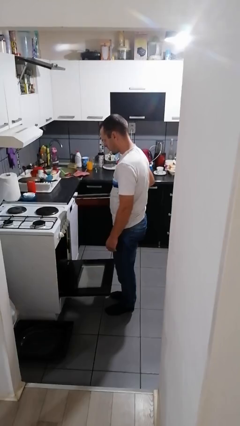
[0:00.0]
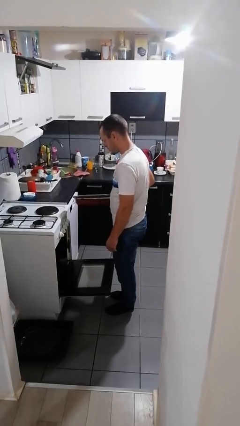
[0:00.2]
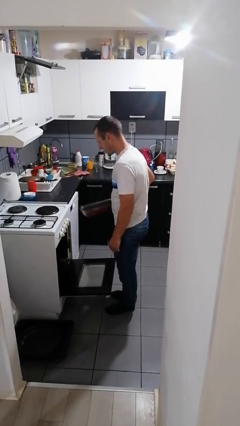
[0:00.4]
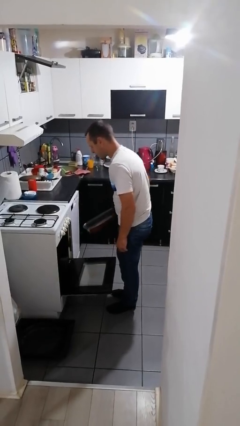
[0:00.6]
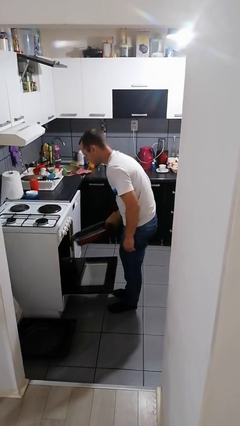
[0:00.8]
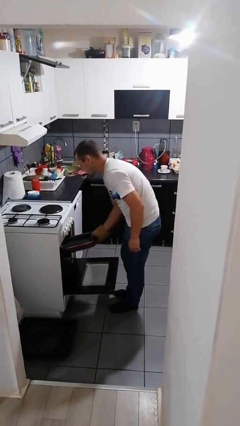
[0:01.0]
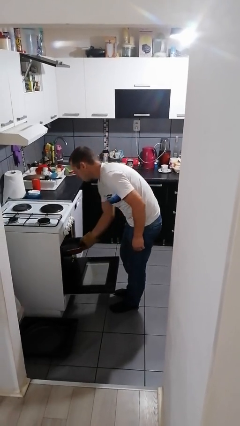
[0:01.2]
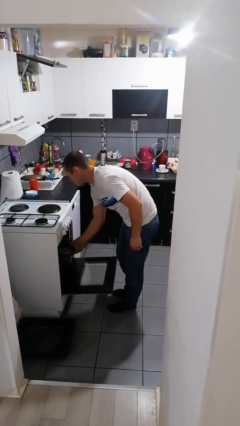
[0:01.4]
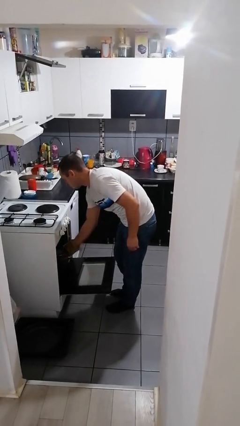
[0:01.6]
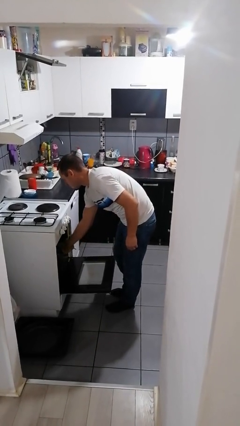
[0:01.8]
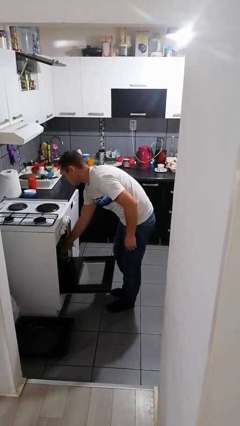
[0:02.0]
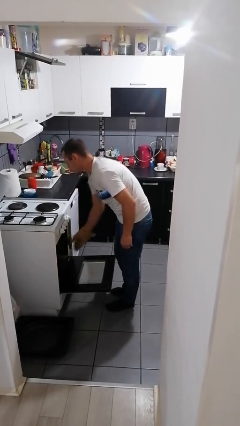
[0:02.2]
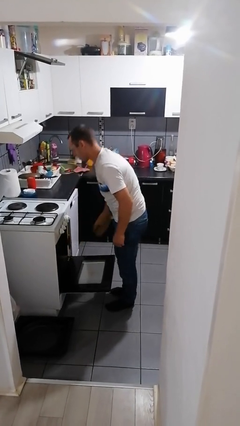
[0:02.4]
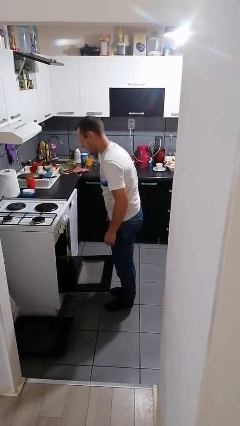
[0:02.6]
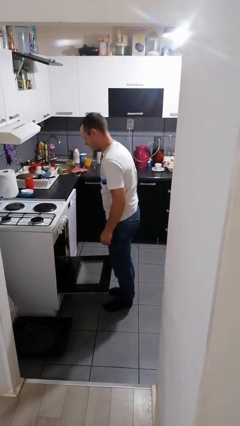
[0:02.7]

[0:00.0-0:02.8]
person puts object into oven

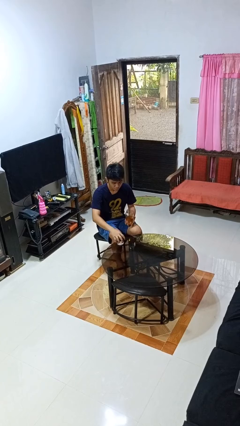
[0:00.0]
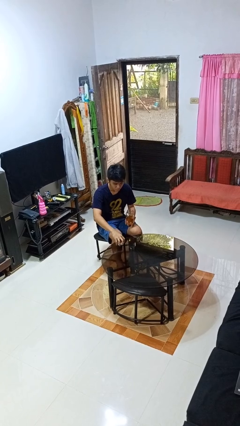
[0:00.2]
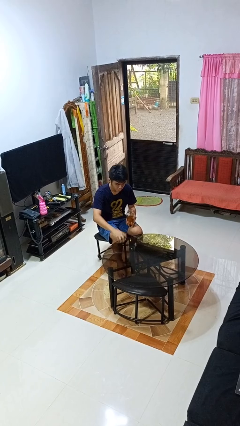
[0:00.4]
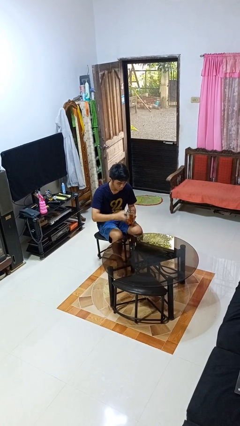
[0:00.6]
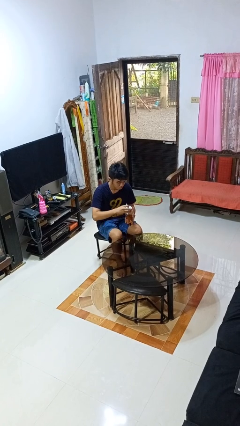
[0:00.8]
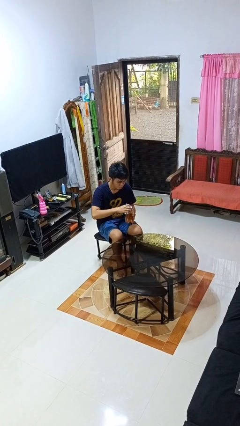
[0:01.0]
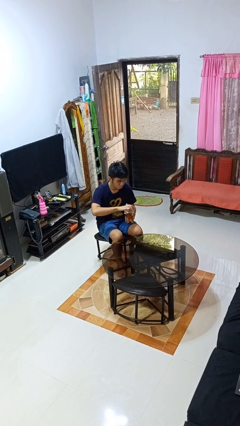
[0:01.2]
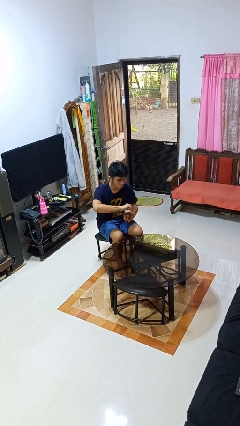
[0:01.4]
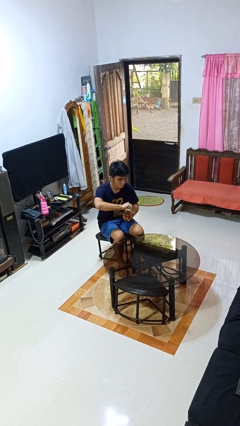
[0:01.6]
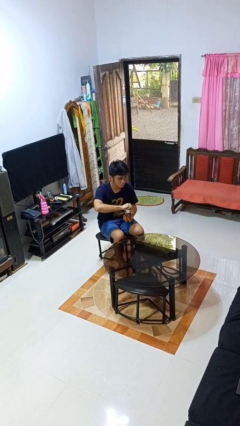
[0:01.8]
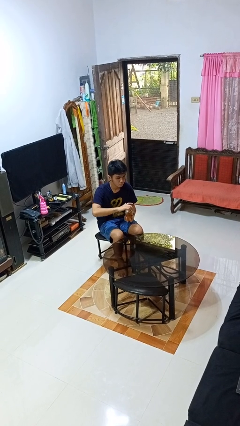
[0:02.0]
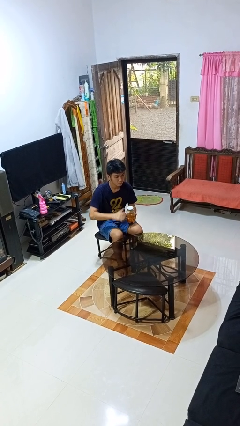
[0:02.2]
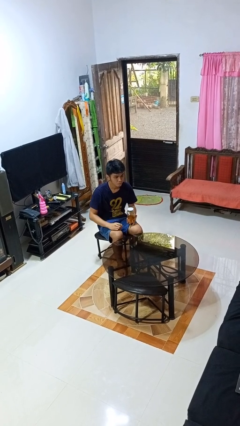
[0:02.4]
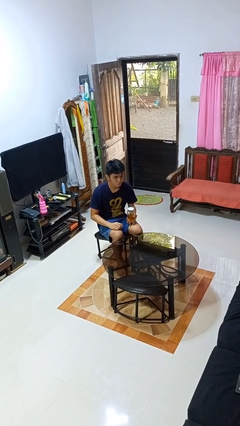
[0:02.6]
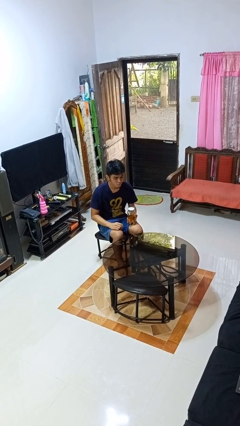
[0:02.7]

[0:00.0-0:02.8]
person closes jar

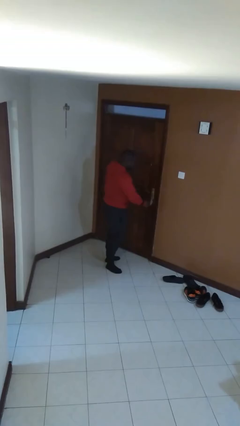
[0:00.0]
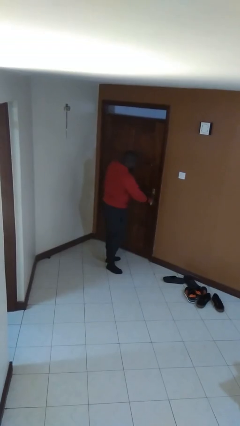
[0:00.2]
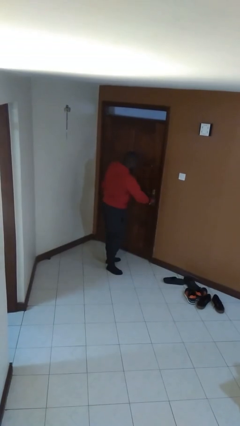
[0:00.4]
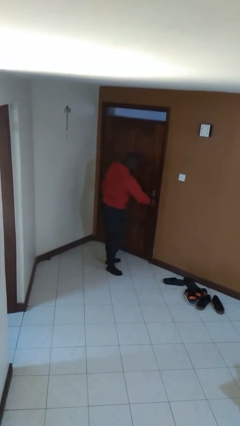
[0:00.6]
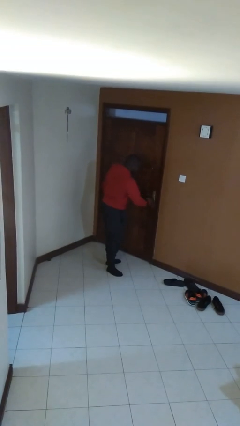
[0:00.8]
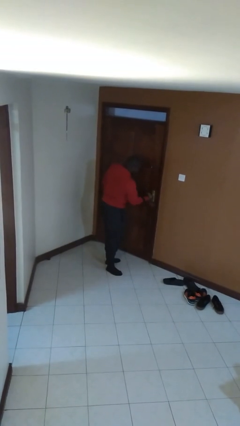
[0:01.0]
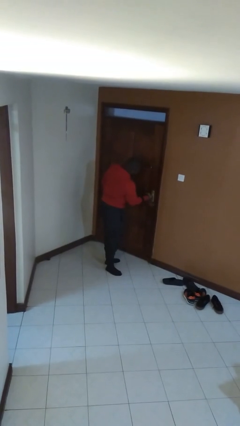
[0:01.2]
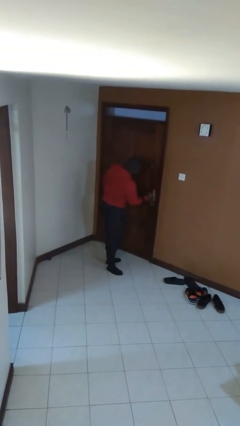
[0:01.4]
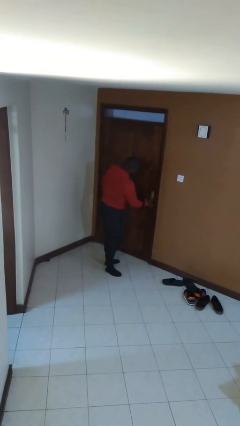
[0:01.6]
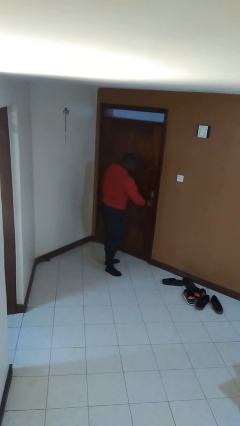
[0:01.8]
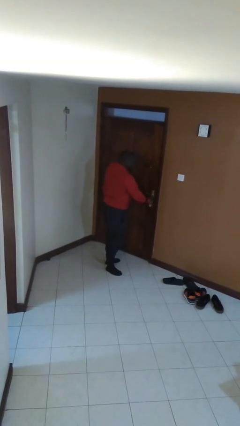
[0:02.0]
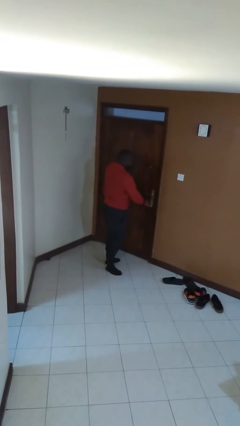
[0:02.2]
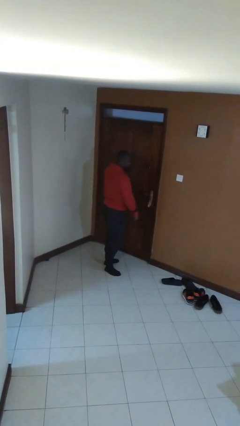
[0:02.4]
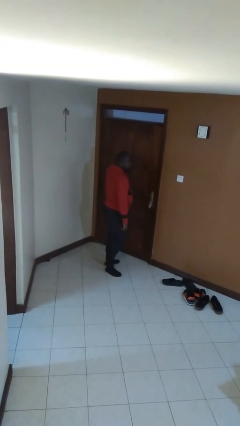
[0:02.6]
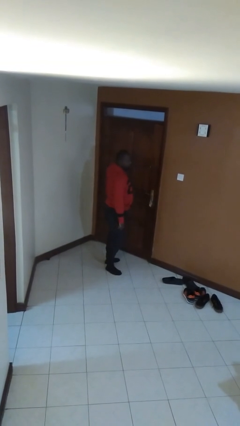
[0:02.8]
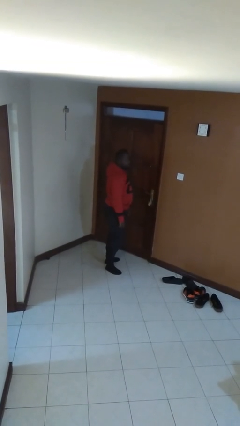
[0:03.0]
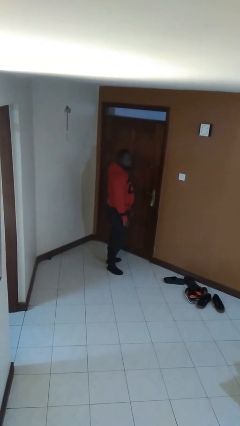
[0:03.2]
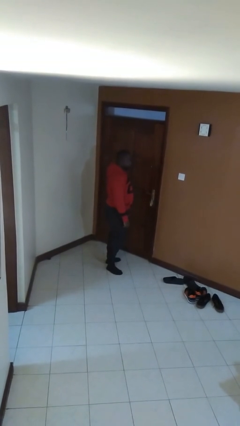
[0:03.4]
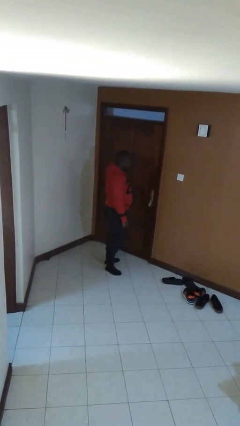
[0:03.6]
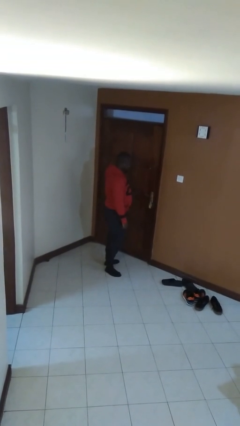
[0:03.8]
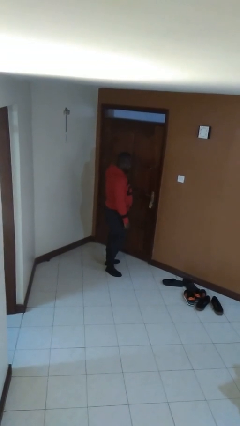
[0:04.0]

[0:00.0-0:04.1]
person locks door with keys

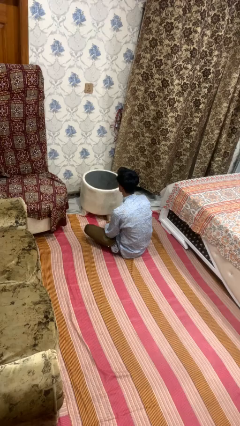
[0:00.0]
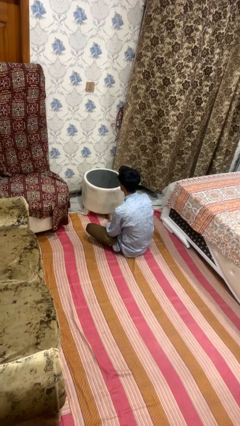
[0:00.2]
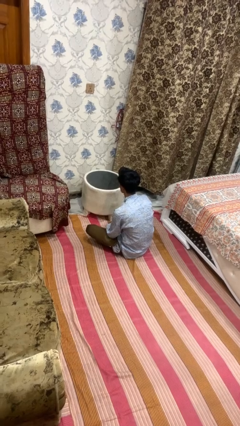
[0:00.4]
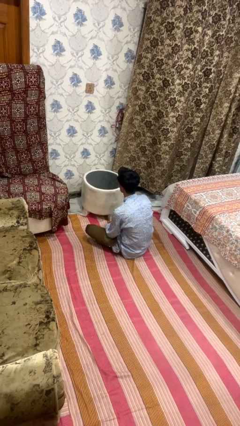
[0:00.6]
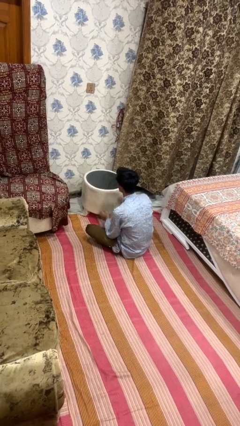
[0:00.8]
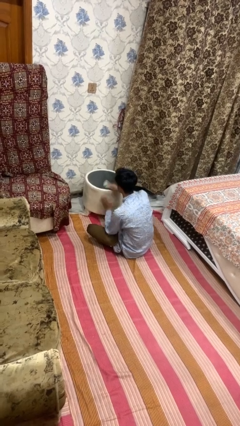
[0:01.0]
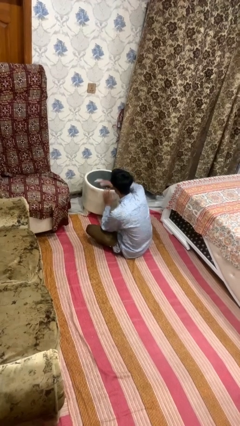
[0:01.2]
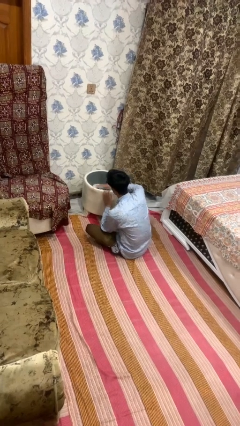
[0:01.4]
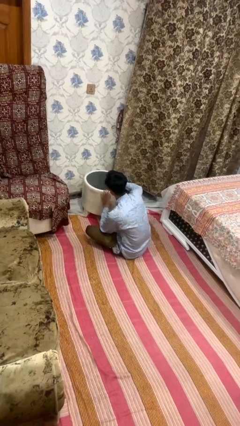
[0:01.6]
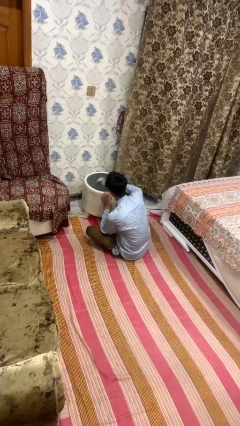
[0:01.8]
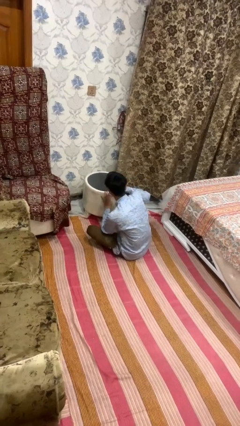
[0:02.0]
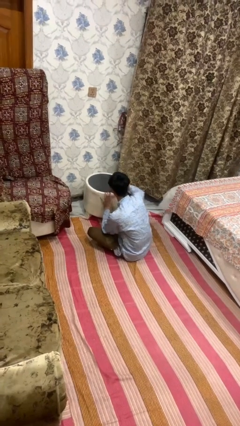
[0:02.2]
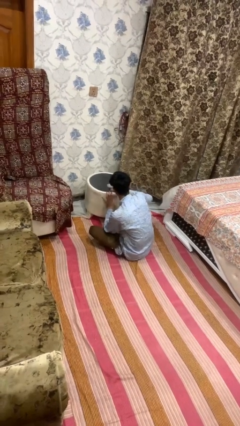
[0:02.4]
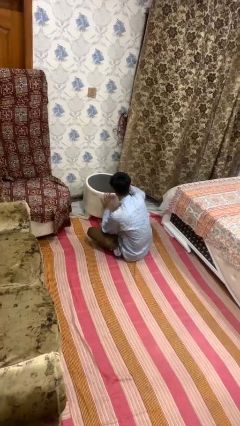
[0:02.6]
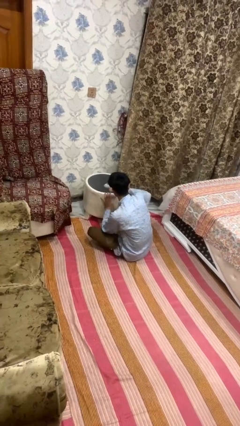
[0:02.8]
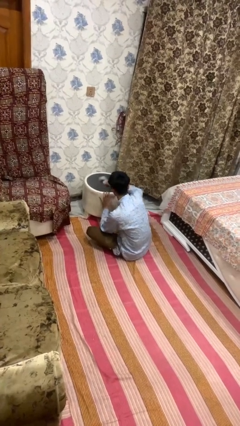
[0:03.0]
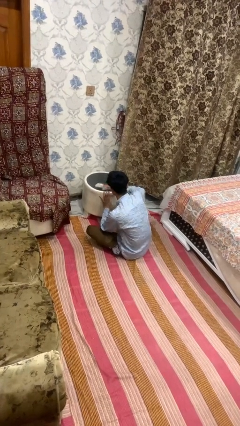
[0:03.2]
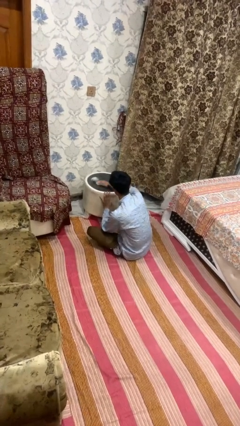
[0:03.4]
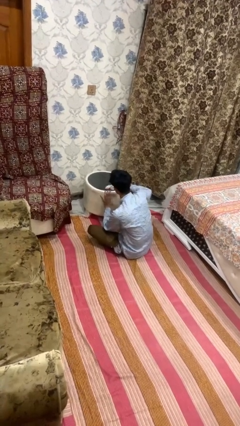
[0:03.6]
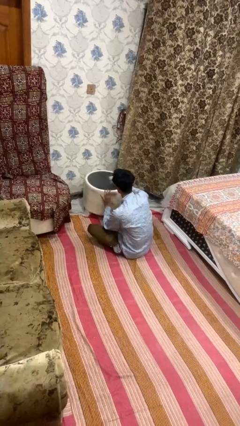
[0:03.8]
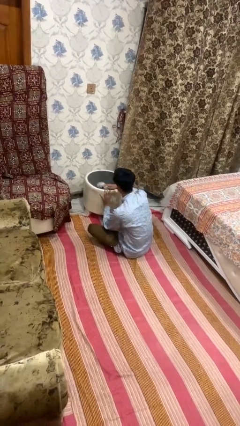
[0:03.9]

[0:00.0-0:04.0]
person cleans table with rag

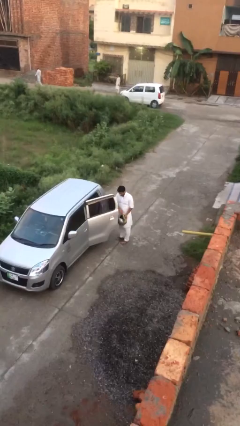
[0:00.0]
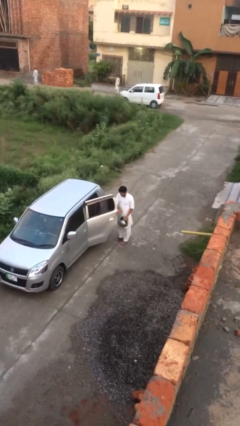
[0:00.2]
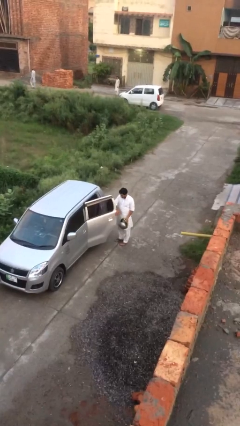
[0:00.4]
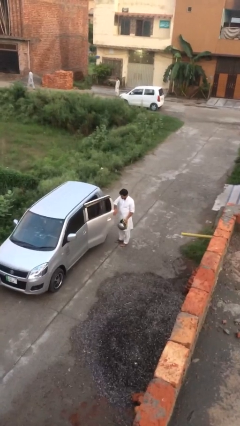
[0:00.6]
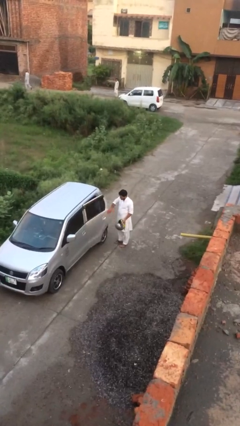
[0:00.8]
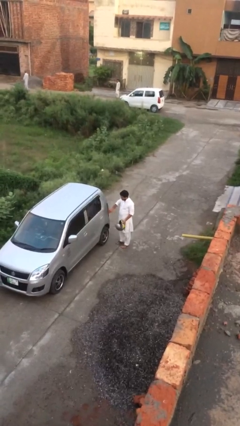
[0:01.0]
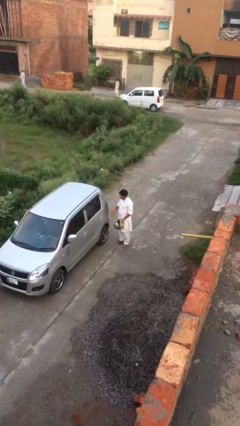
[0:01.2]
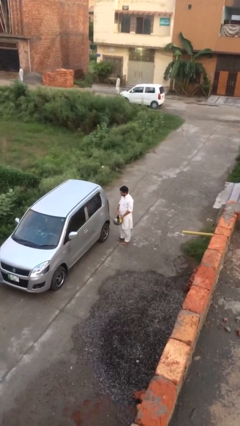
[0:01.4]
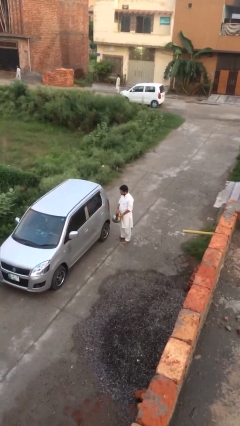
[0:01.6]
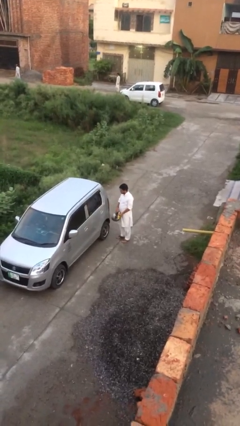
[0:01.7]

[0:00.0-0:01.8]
person closes car door

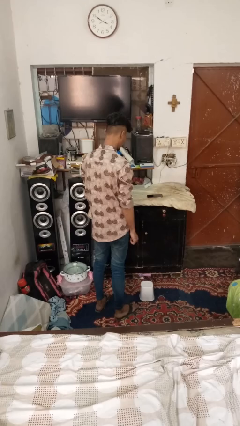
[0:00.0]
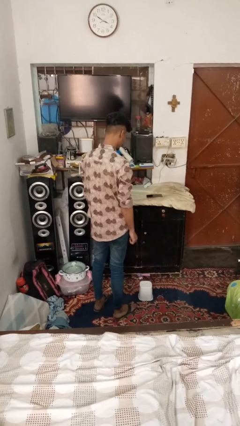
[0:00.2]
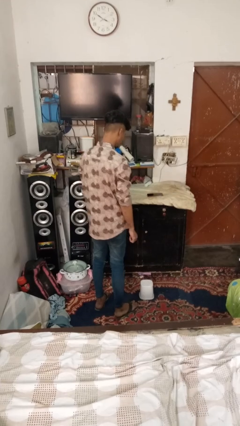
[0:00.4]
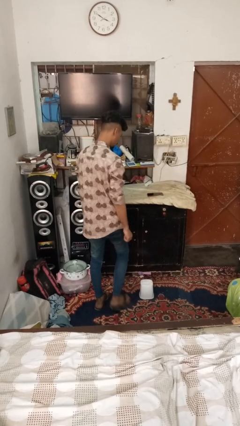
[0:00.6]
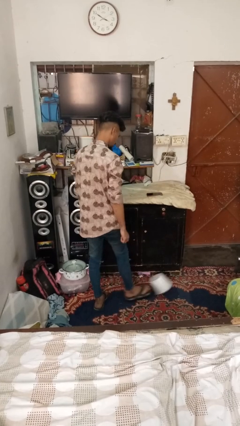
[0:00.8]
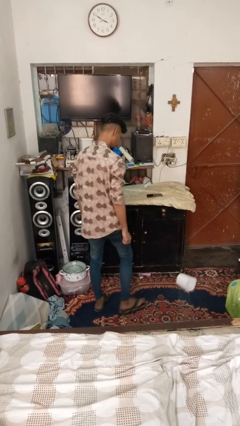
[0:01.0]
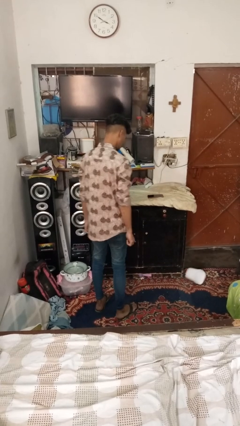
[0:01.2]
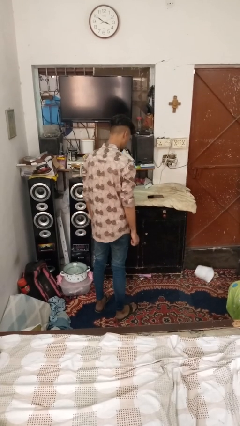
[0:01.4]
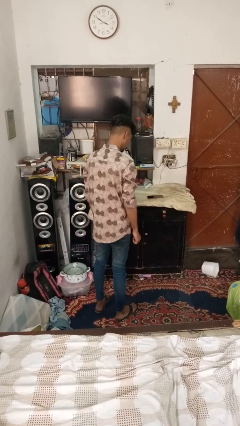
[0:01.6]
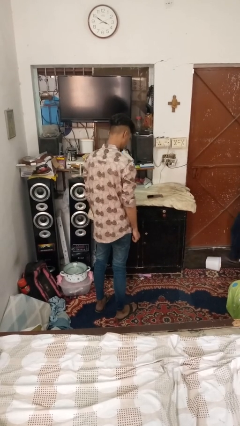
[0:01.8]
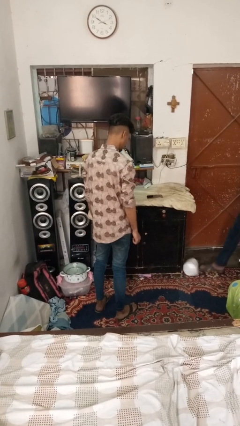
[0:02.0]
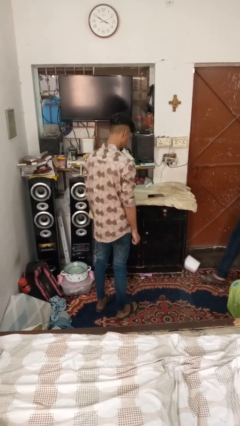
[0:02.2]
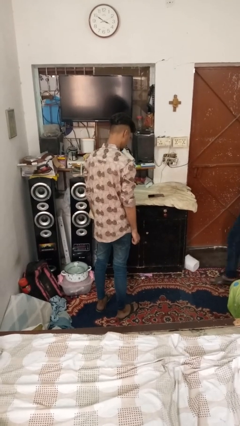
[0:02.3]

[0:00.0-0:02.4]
person kicks object to person
